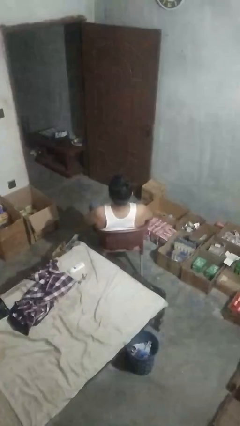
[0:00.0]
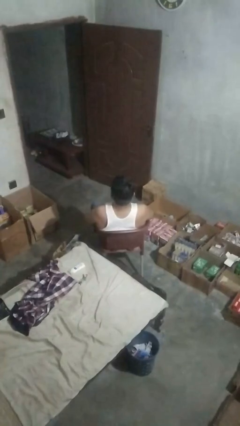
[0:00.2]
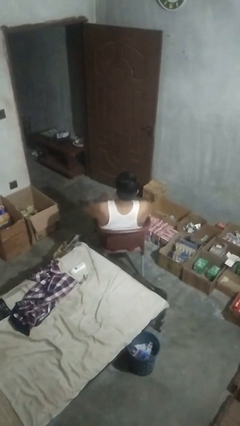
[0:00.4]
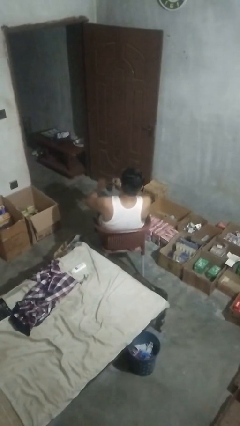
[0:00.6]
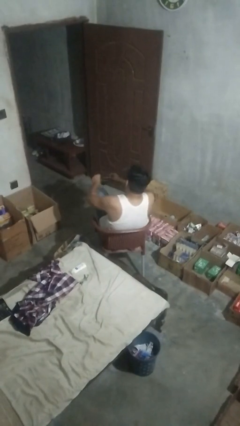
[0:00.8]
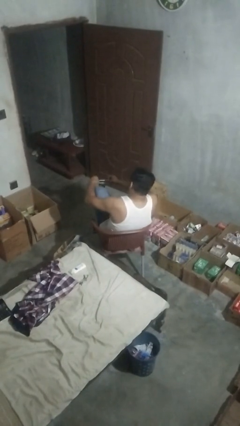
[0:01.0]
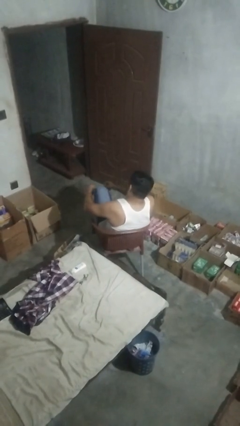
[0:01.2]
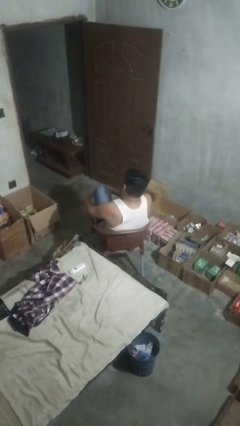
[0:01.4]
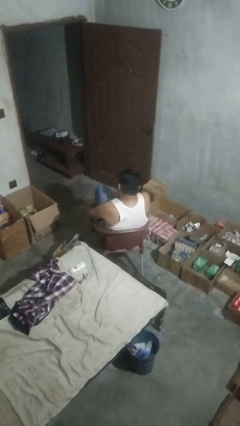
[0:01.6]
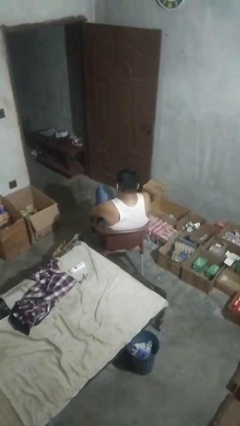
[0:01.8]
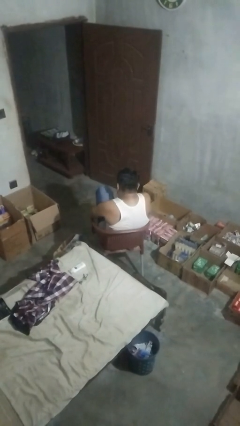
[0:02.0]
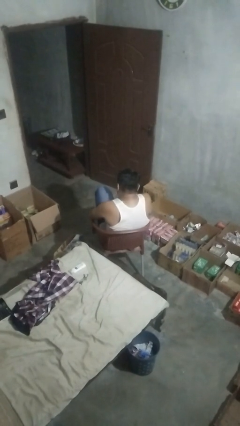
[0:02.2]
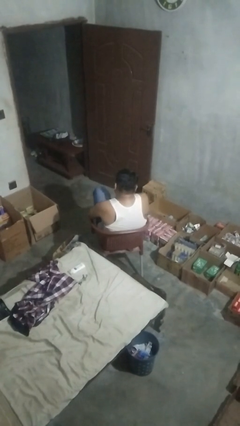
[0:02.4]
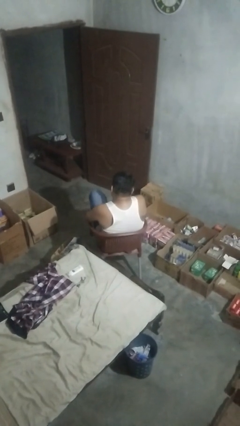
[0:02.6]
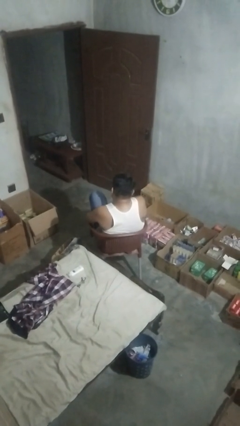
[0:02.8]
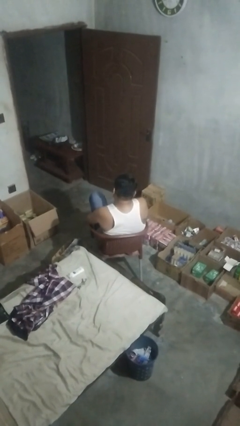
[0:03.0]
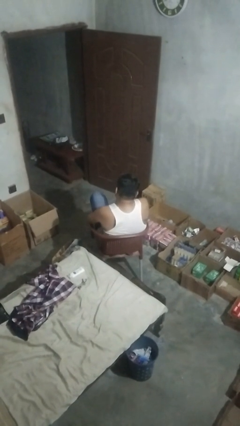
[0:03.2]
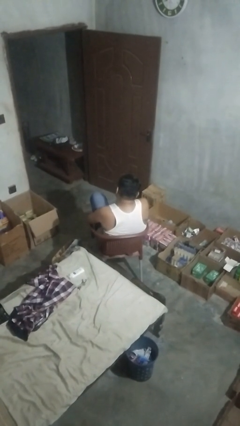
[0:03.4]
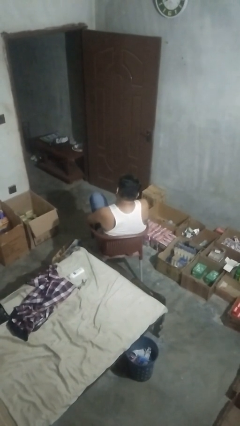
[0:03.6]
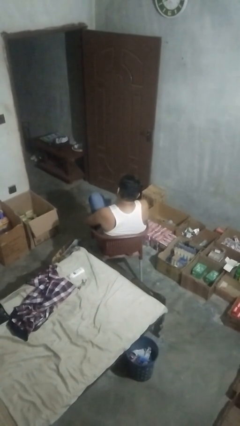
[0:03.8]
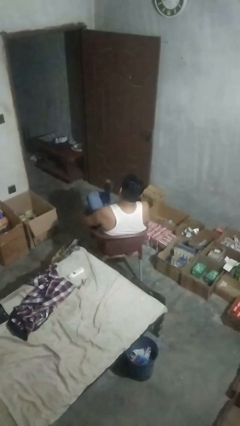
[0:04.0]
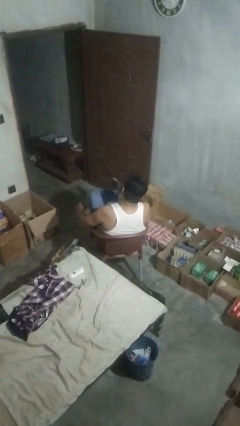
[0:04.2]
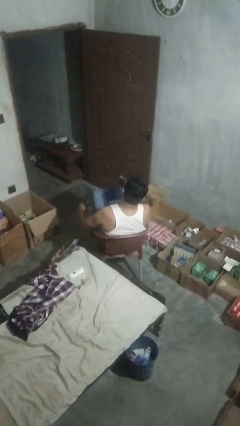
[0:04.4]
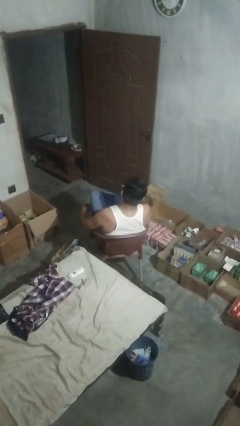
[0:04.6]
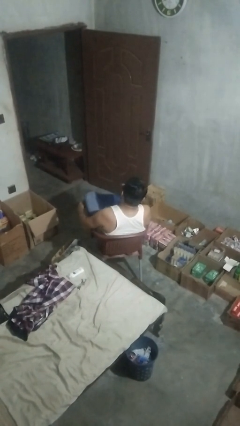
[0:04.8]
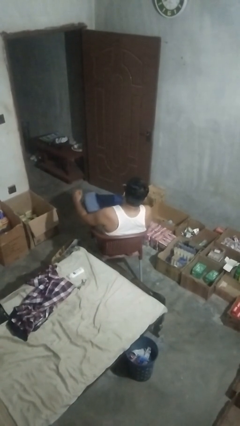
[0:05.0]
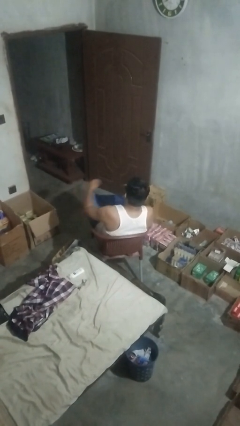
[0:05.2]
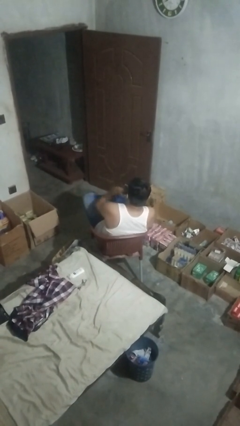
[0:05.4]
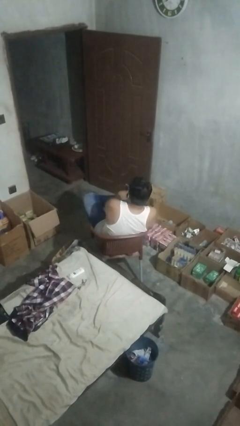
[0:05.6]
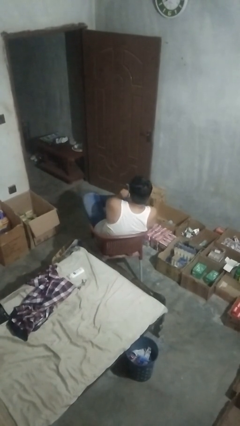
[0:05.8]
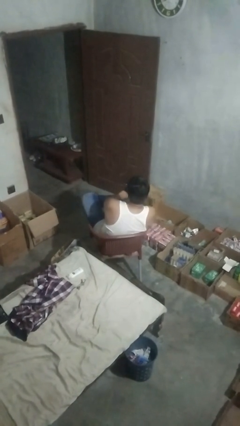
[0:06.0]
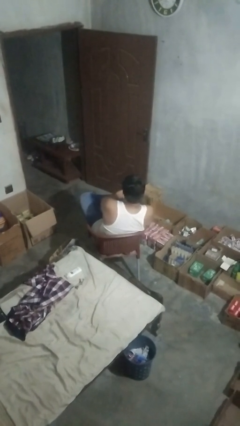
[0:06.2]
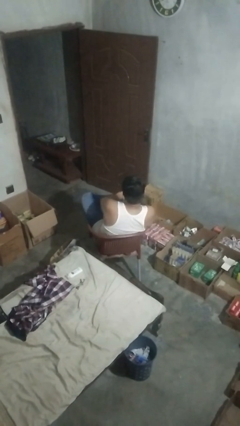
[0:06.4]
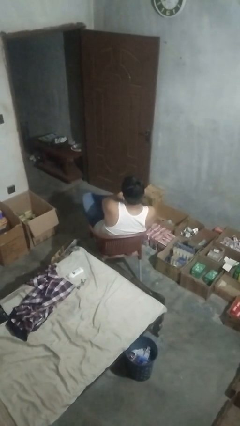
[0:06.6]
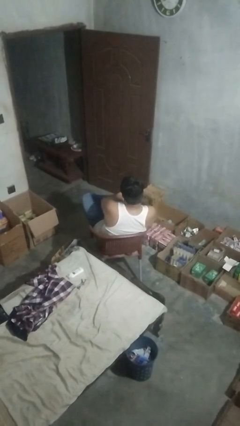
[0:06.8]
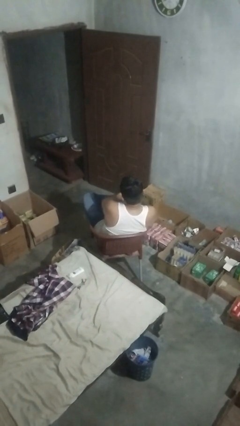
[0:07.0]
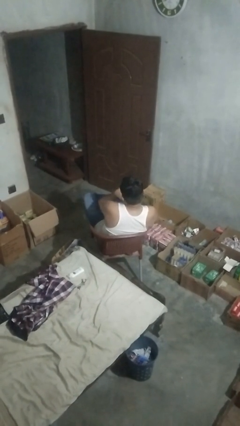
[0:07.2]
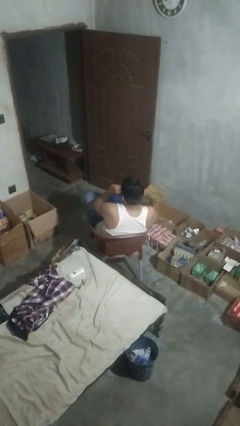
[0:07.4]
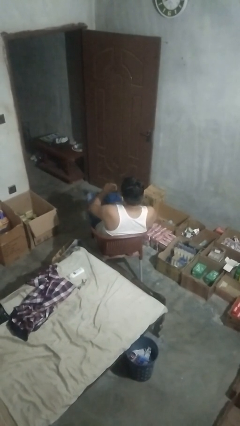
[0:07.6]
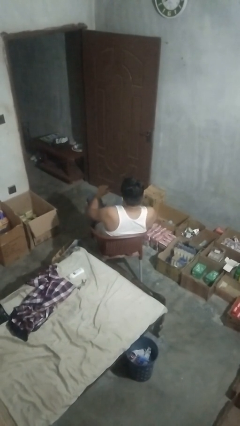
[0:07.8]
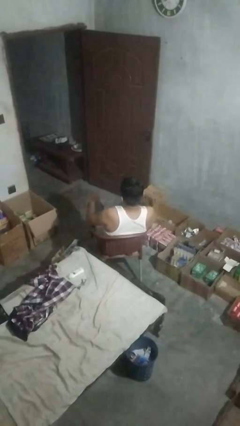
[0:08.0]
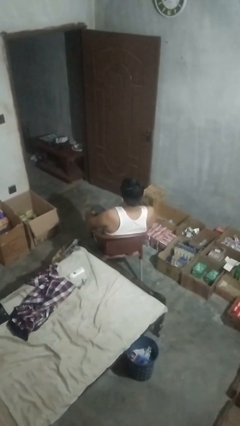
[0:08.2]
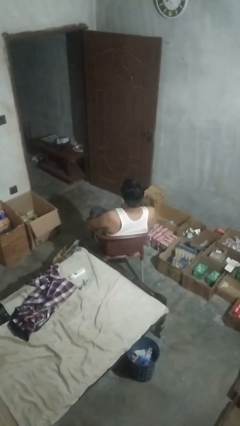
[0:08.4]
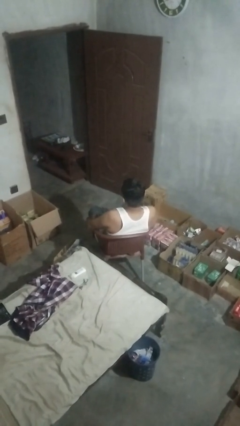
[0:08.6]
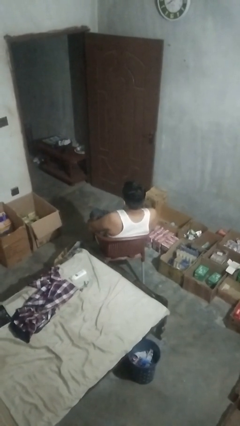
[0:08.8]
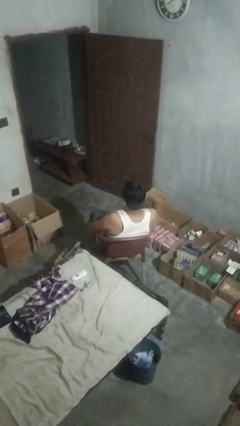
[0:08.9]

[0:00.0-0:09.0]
person puts on socks

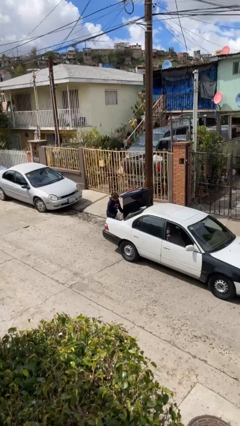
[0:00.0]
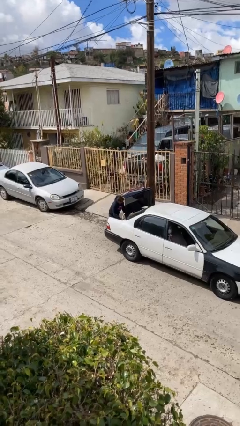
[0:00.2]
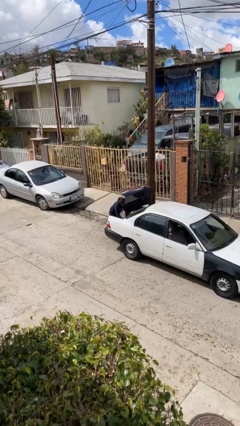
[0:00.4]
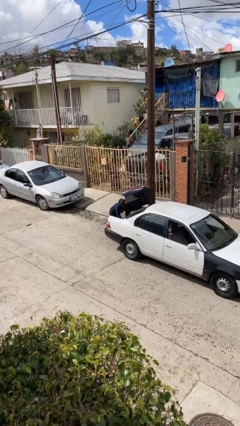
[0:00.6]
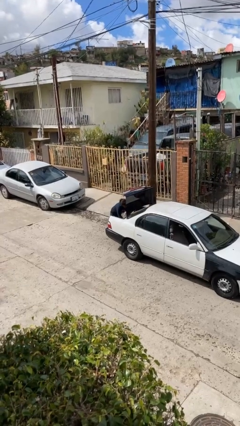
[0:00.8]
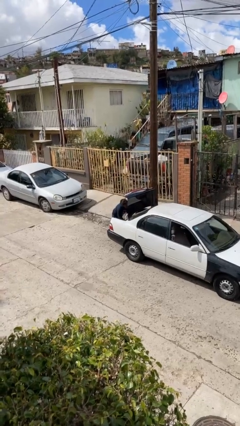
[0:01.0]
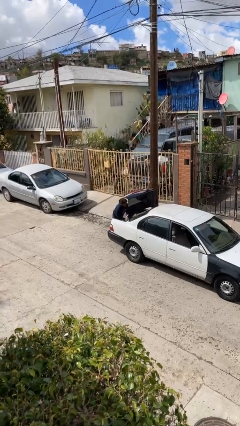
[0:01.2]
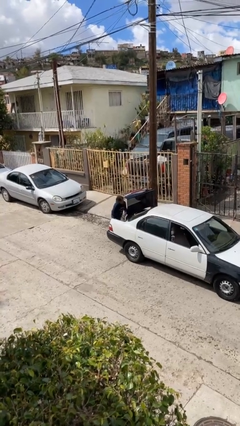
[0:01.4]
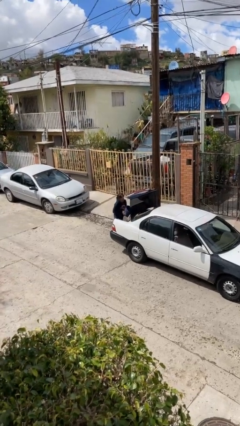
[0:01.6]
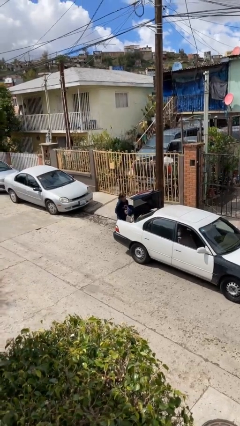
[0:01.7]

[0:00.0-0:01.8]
person unloads car

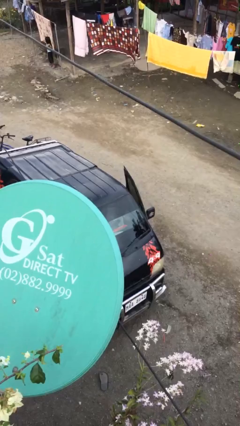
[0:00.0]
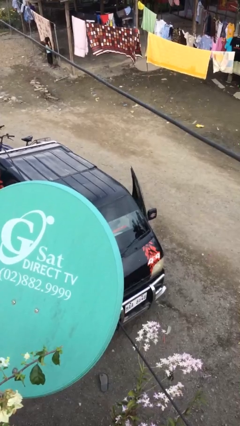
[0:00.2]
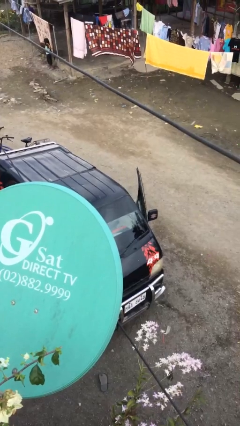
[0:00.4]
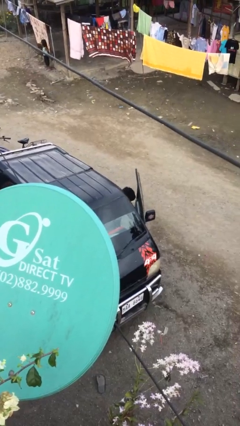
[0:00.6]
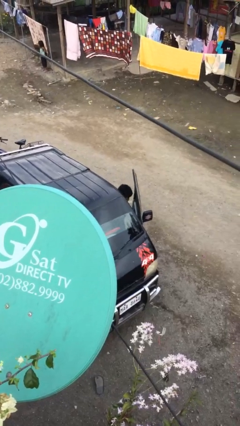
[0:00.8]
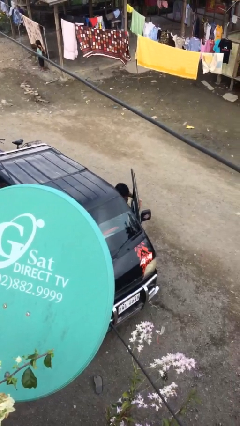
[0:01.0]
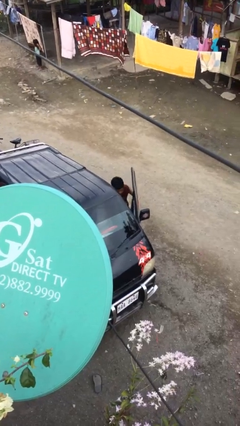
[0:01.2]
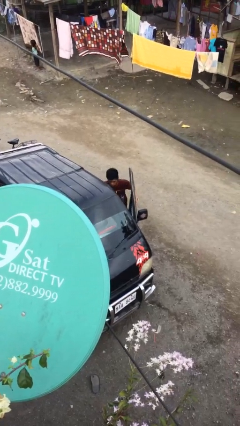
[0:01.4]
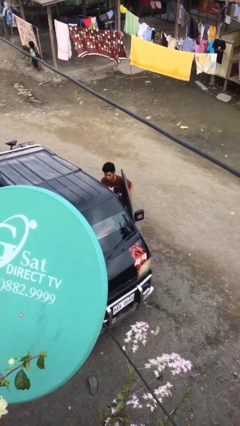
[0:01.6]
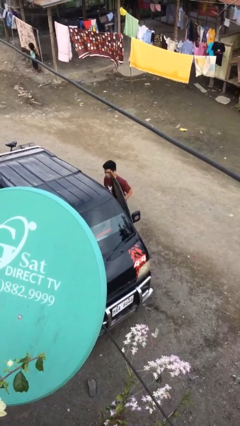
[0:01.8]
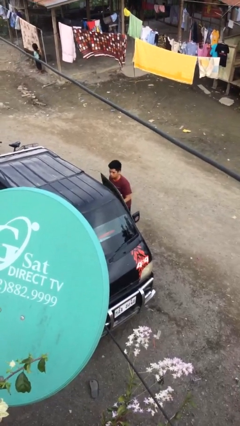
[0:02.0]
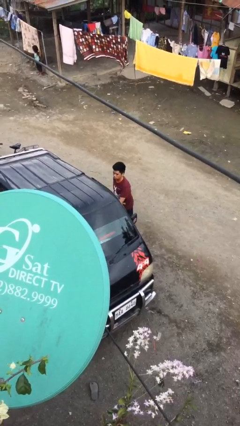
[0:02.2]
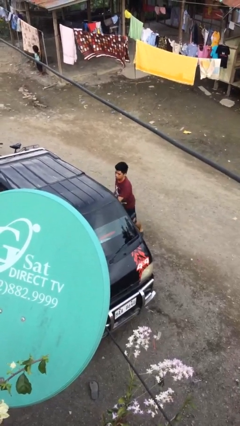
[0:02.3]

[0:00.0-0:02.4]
person exits car

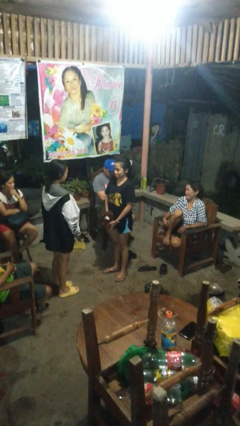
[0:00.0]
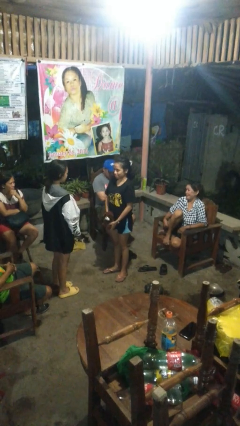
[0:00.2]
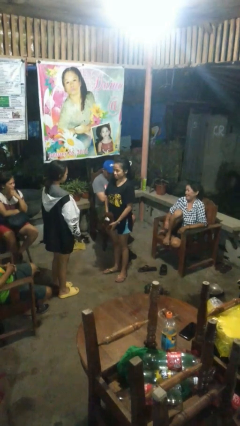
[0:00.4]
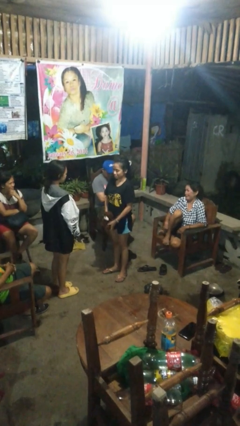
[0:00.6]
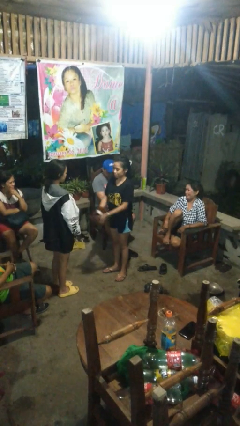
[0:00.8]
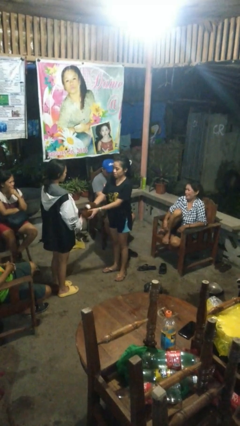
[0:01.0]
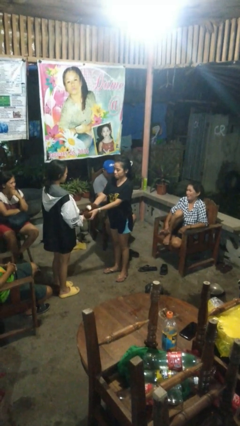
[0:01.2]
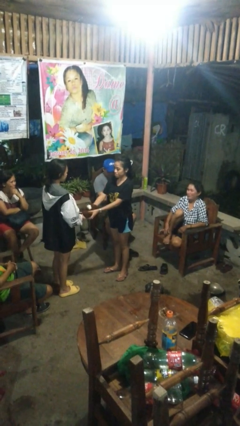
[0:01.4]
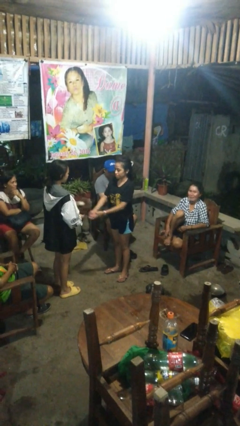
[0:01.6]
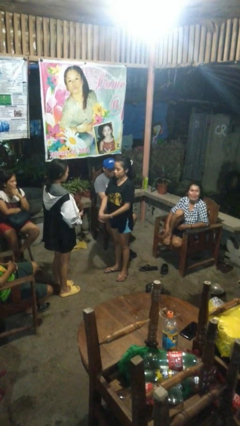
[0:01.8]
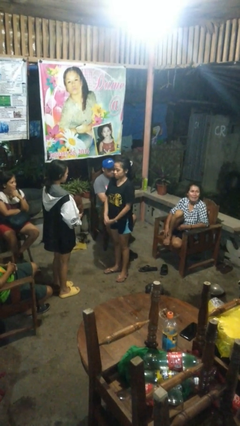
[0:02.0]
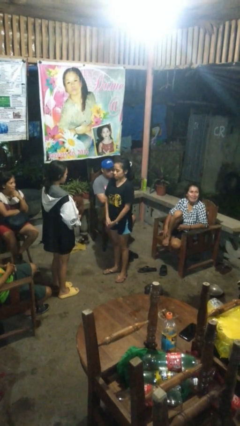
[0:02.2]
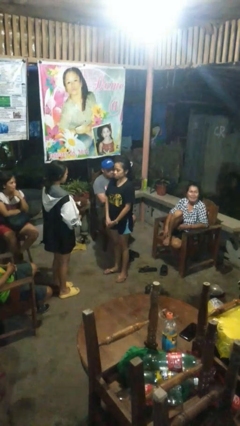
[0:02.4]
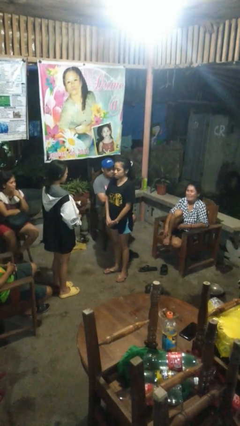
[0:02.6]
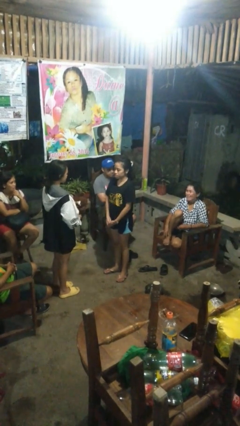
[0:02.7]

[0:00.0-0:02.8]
person transfers object to person

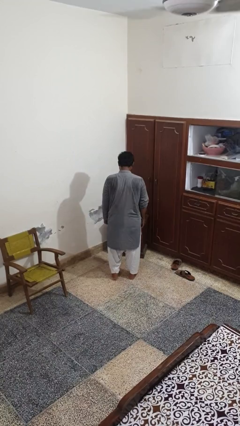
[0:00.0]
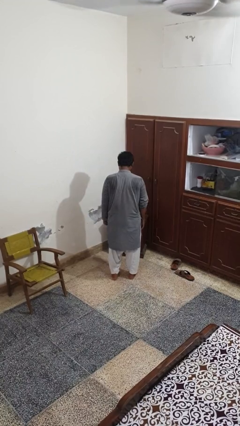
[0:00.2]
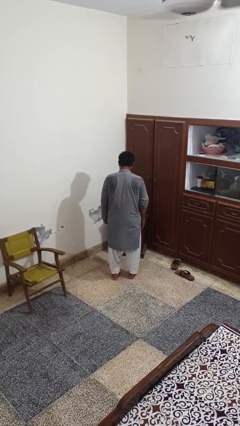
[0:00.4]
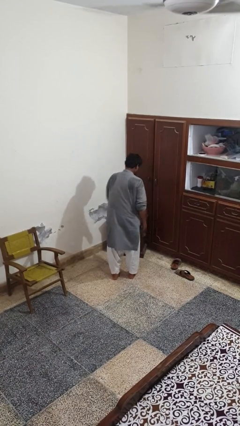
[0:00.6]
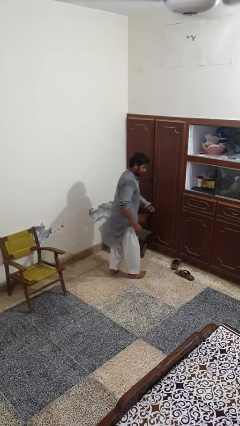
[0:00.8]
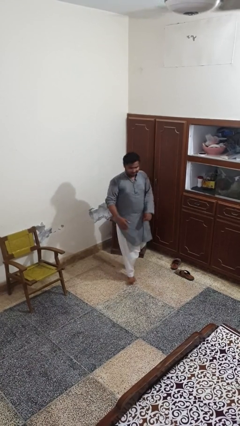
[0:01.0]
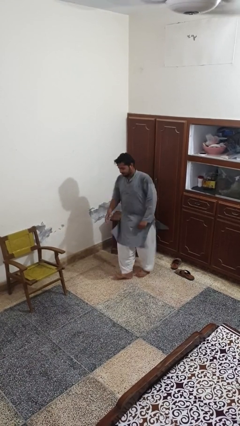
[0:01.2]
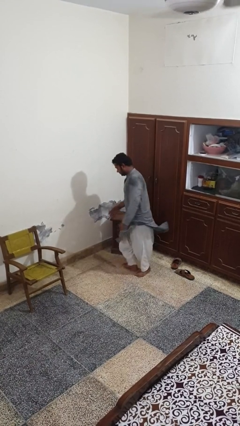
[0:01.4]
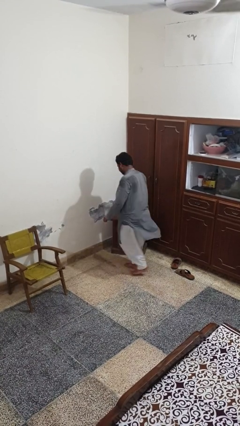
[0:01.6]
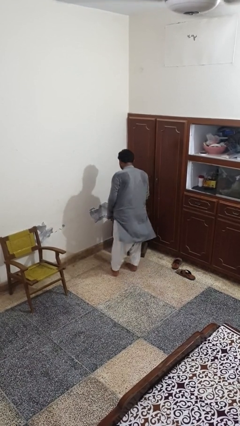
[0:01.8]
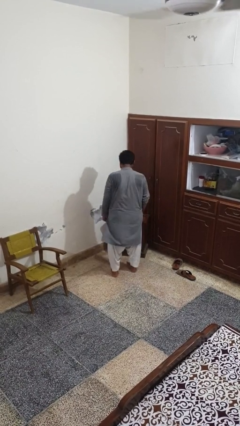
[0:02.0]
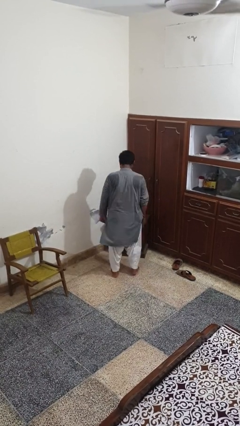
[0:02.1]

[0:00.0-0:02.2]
person twirls
